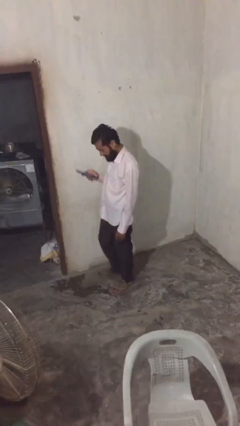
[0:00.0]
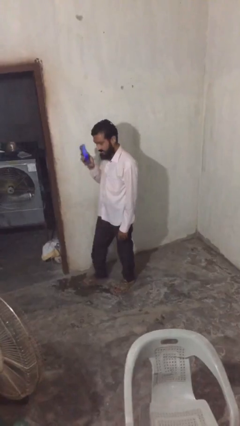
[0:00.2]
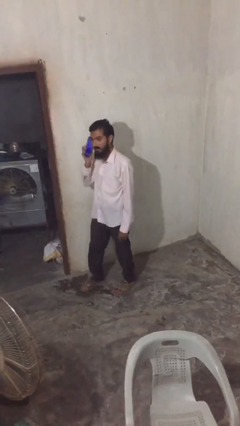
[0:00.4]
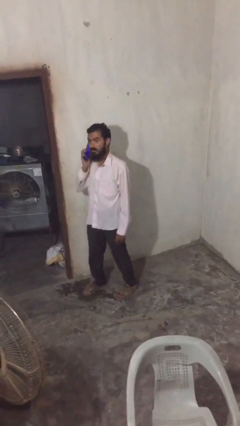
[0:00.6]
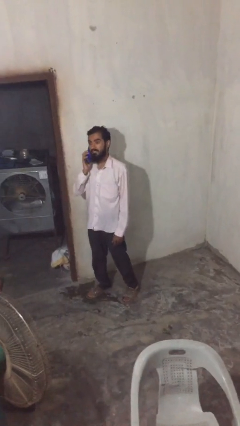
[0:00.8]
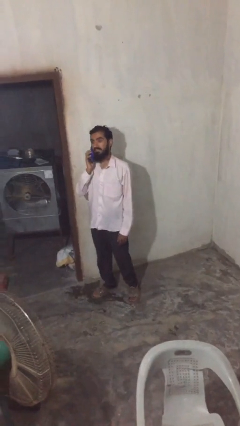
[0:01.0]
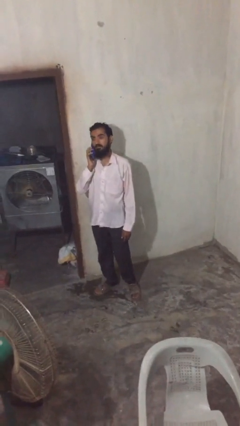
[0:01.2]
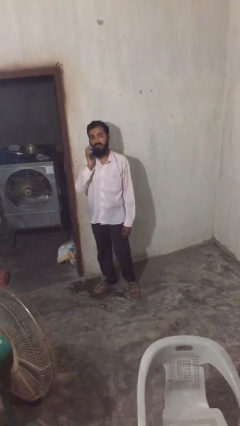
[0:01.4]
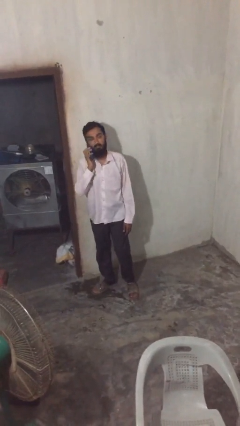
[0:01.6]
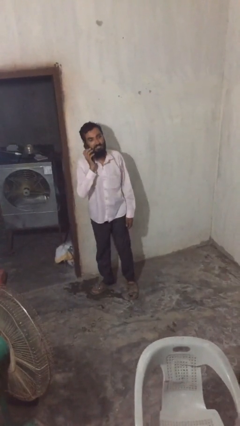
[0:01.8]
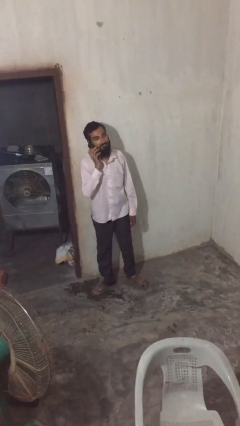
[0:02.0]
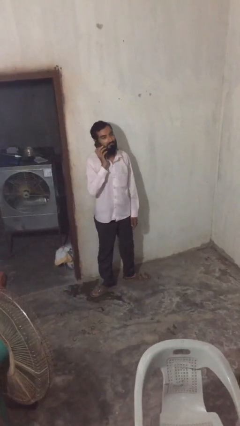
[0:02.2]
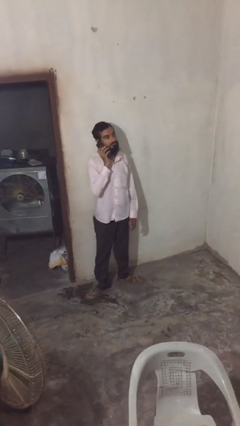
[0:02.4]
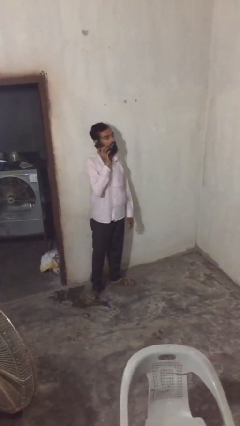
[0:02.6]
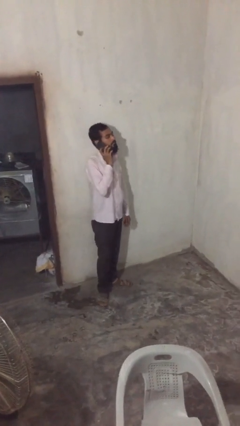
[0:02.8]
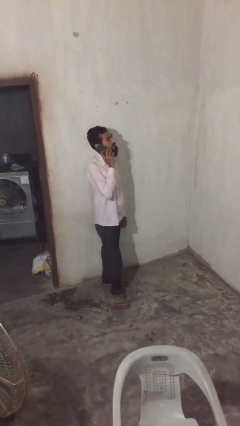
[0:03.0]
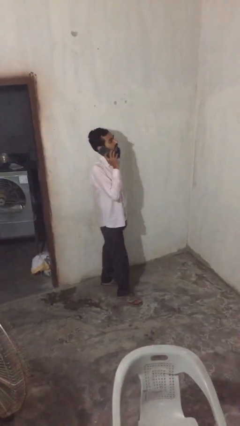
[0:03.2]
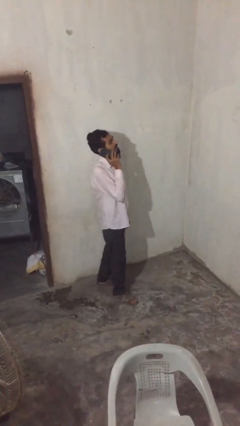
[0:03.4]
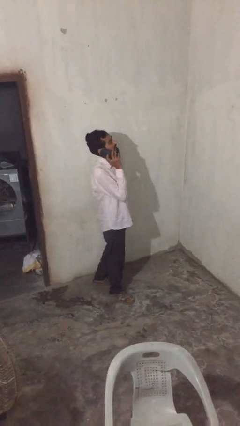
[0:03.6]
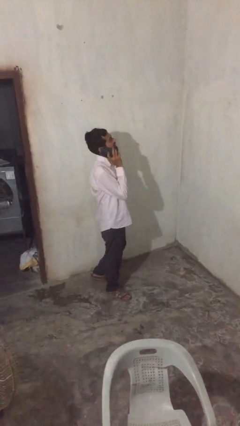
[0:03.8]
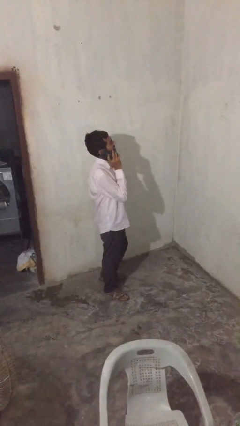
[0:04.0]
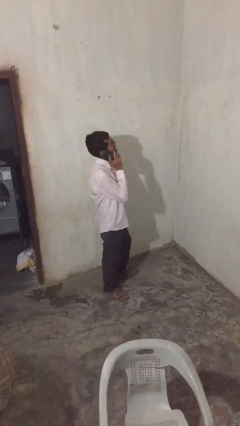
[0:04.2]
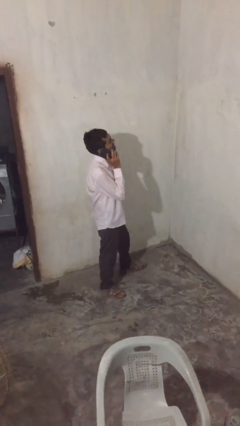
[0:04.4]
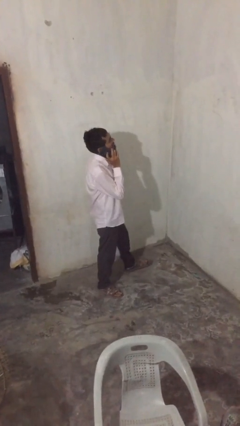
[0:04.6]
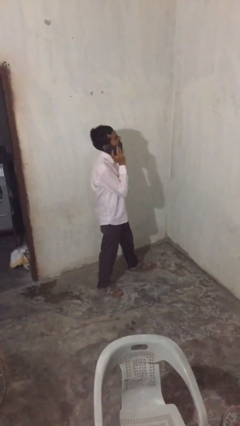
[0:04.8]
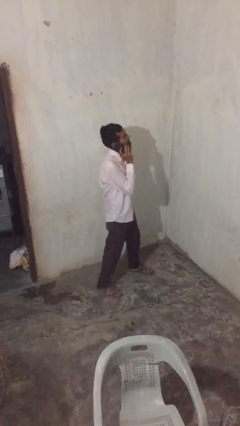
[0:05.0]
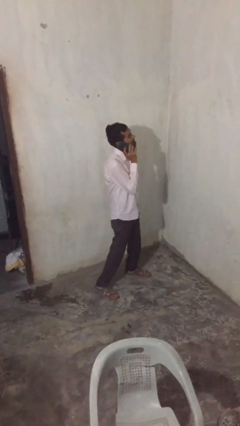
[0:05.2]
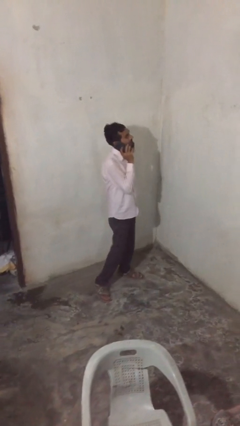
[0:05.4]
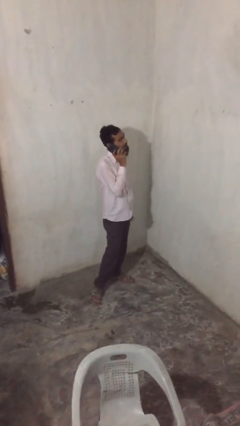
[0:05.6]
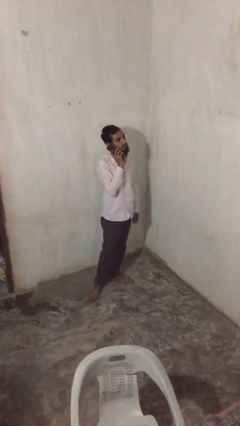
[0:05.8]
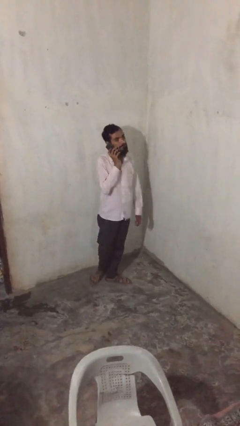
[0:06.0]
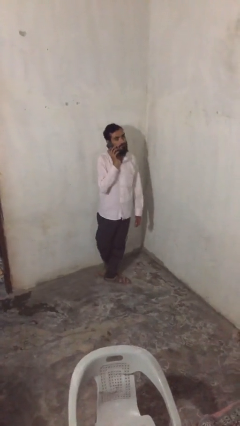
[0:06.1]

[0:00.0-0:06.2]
person talks on phone

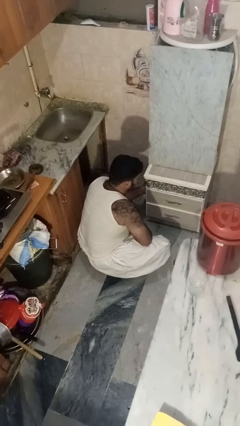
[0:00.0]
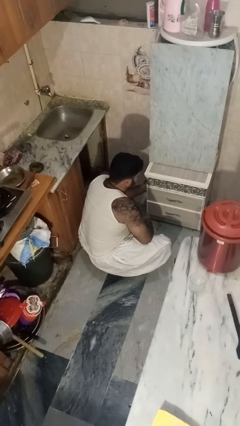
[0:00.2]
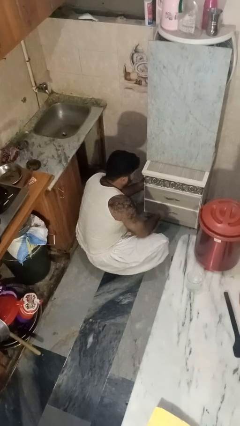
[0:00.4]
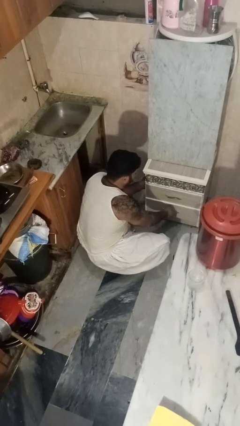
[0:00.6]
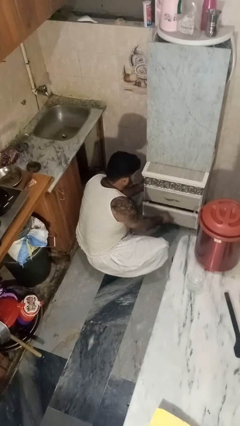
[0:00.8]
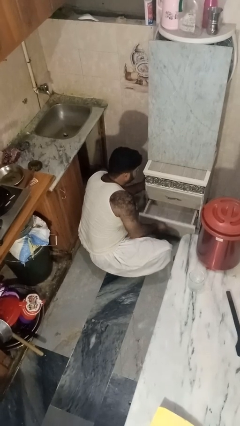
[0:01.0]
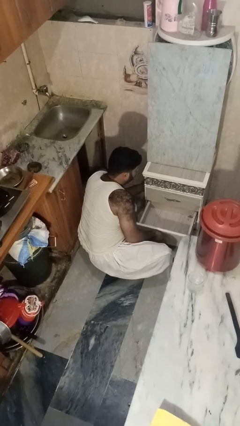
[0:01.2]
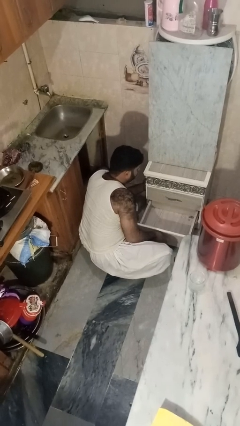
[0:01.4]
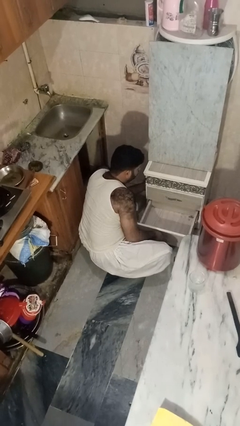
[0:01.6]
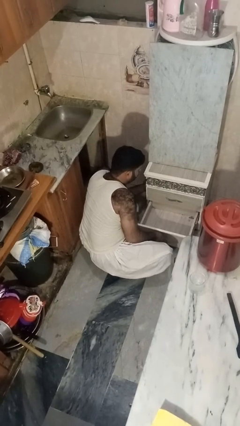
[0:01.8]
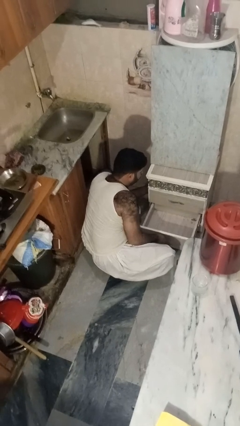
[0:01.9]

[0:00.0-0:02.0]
person opens kitchen drawer

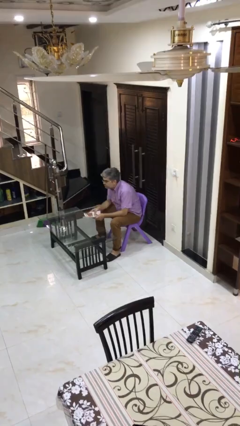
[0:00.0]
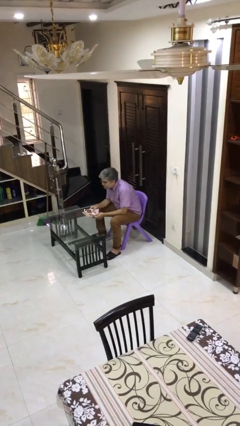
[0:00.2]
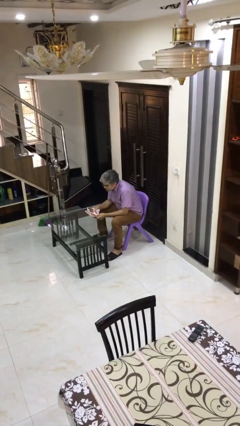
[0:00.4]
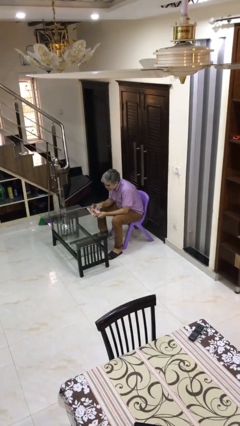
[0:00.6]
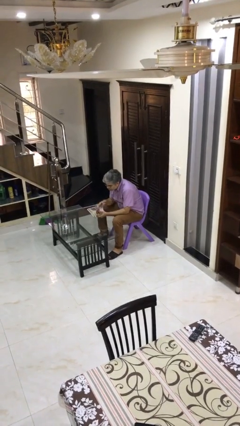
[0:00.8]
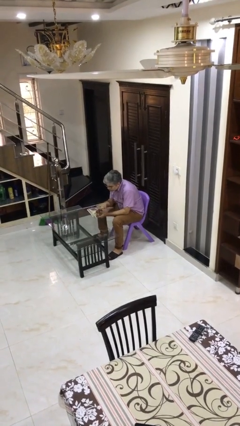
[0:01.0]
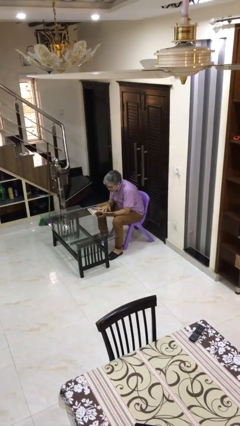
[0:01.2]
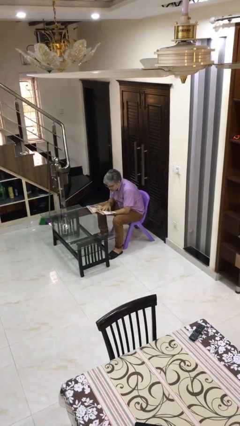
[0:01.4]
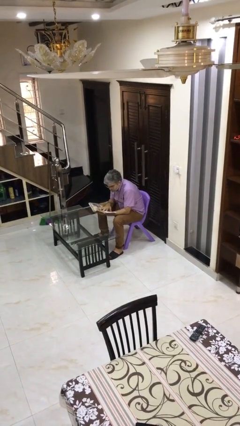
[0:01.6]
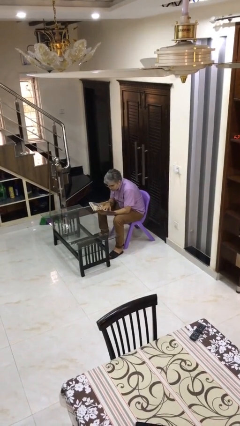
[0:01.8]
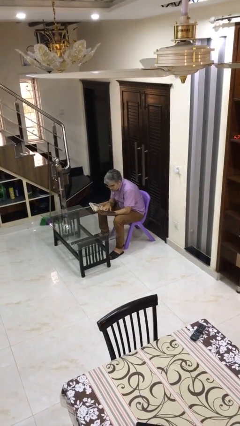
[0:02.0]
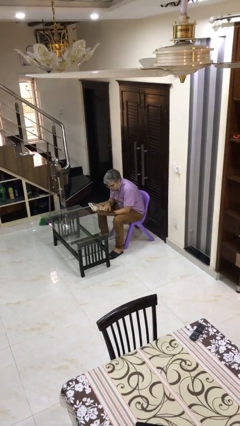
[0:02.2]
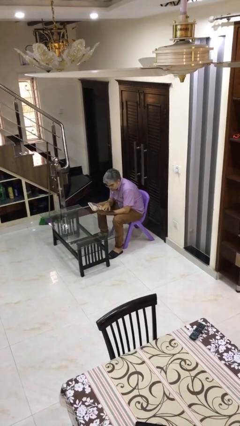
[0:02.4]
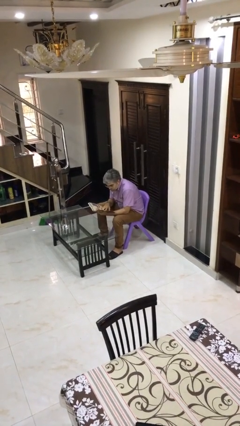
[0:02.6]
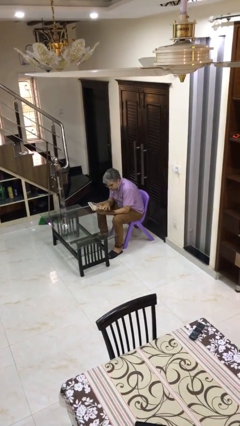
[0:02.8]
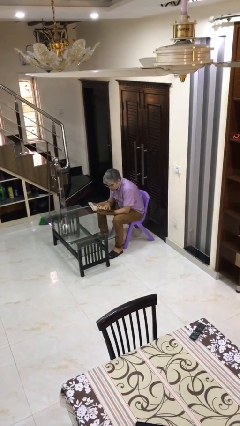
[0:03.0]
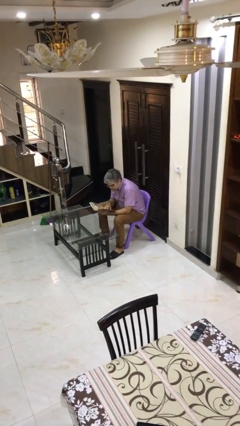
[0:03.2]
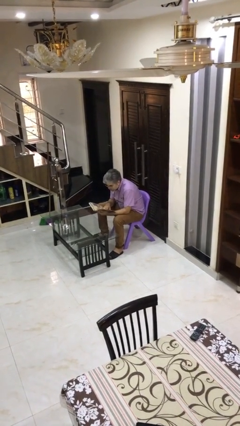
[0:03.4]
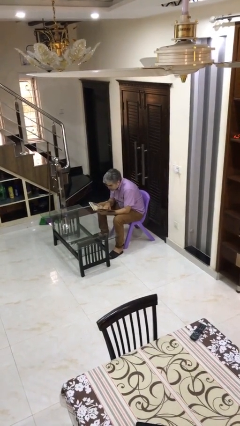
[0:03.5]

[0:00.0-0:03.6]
person reads document

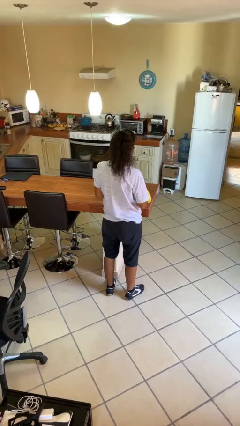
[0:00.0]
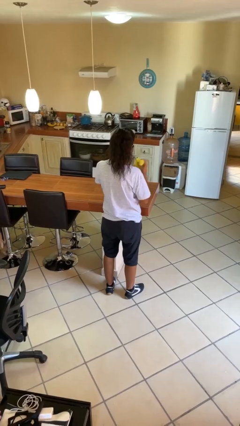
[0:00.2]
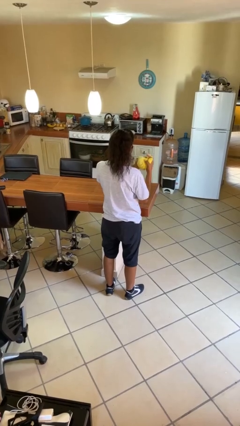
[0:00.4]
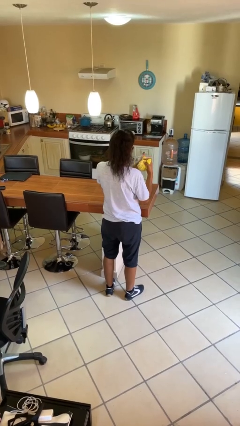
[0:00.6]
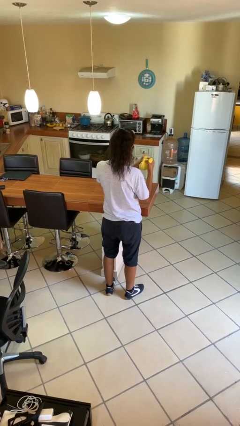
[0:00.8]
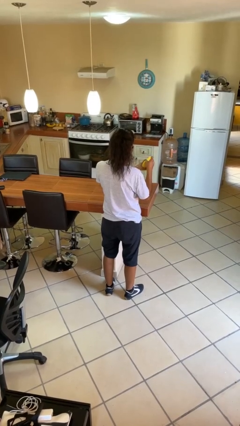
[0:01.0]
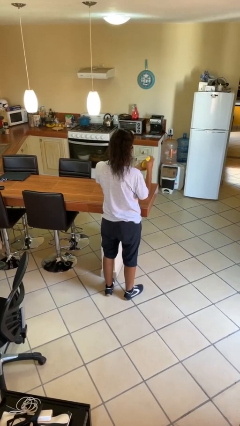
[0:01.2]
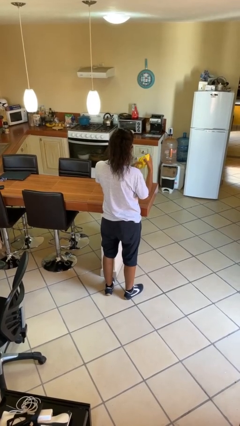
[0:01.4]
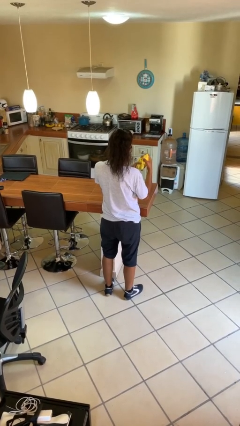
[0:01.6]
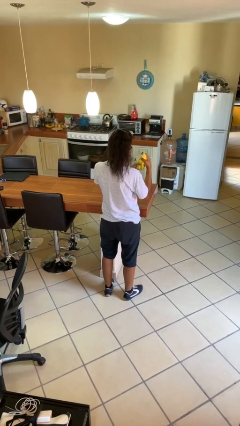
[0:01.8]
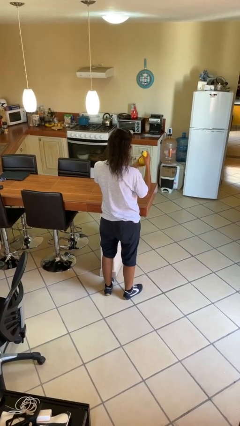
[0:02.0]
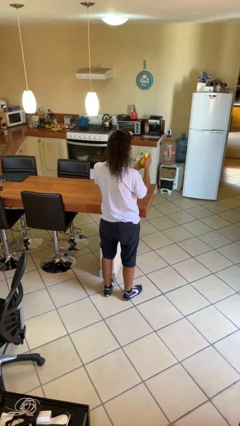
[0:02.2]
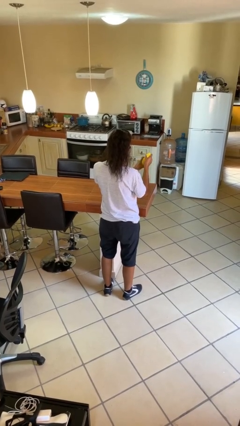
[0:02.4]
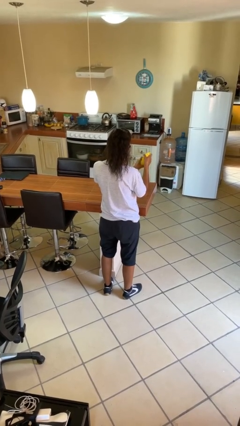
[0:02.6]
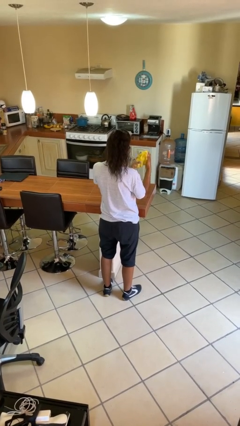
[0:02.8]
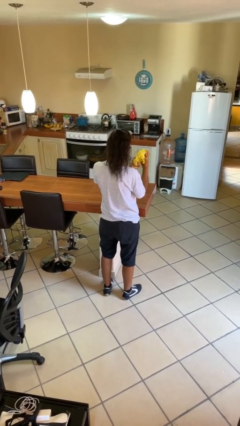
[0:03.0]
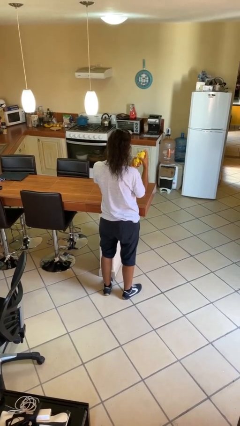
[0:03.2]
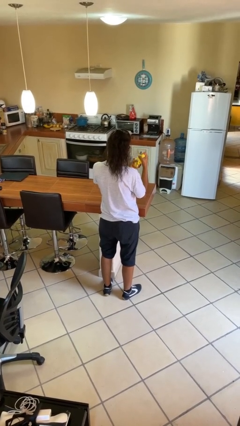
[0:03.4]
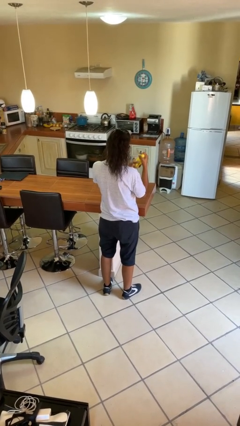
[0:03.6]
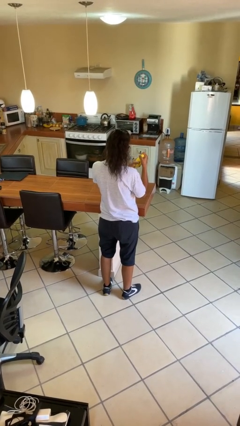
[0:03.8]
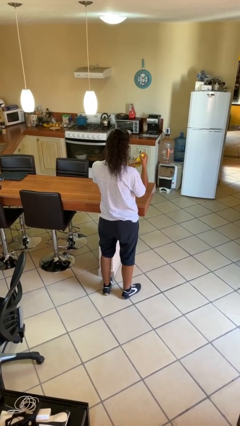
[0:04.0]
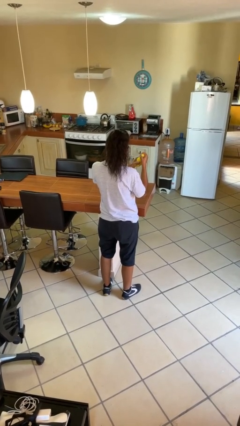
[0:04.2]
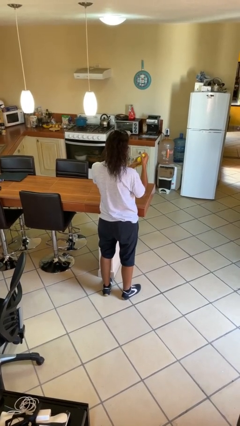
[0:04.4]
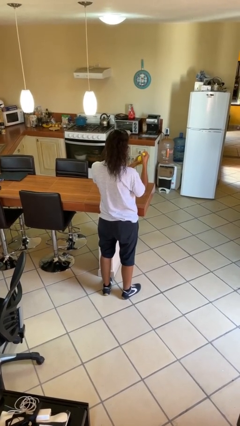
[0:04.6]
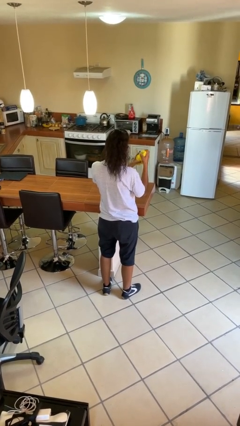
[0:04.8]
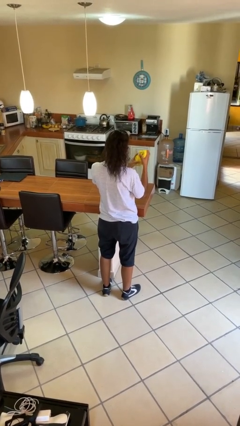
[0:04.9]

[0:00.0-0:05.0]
person squeezes object

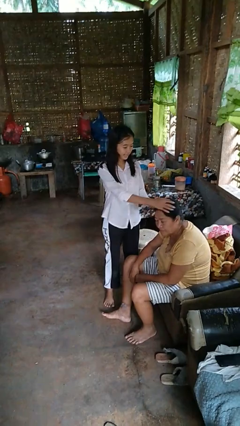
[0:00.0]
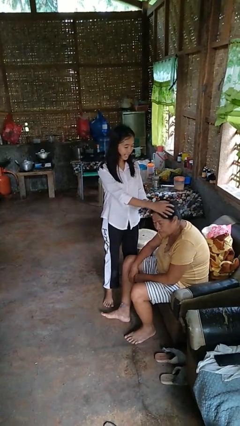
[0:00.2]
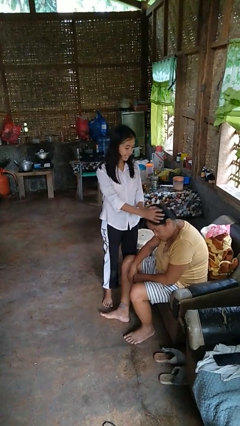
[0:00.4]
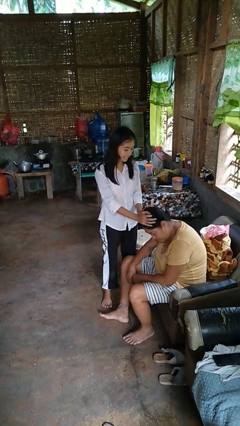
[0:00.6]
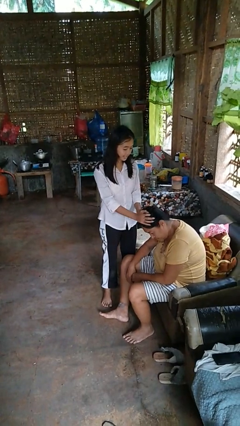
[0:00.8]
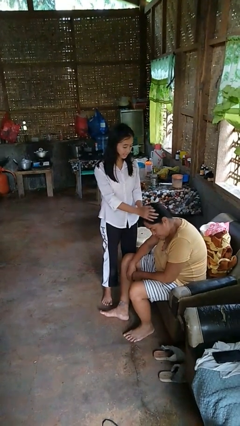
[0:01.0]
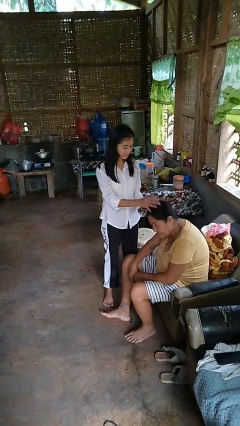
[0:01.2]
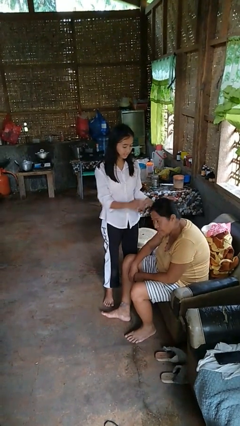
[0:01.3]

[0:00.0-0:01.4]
person grabs person by hair
